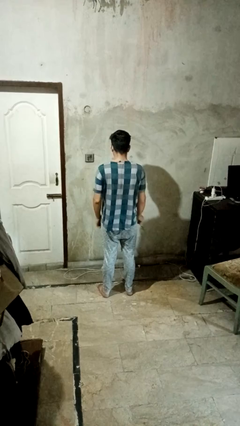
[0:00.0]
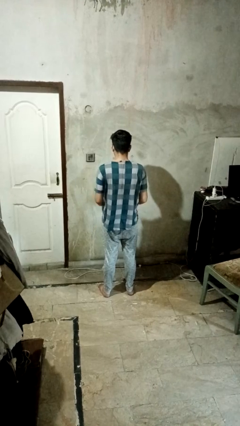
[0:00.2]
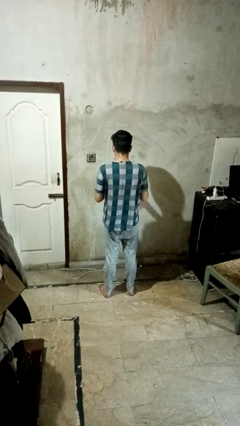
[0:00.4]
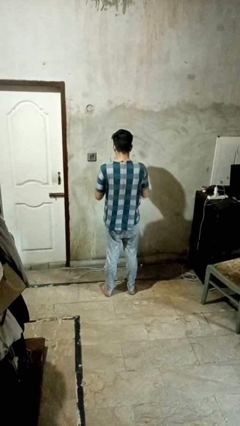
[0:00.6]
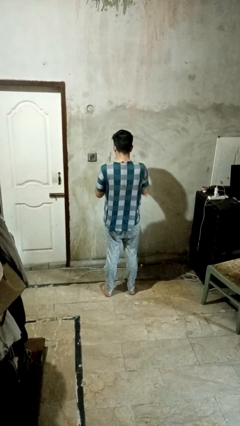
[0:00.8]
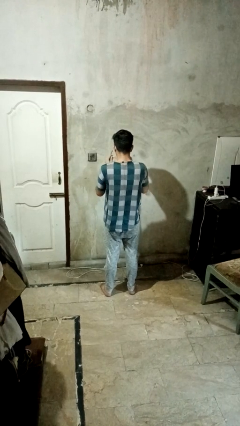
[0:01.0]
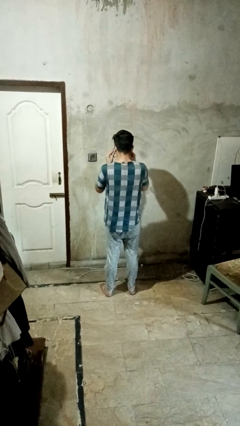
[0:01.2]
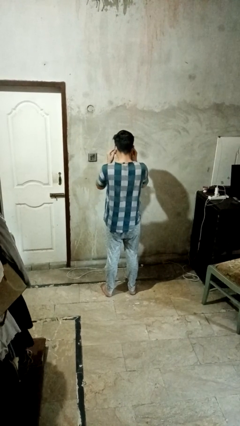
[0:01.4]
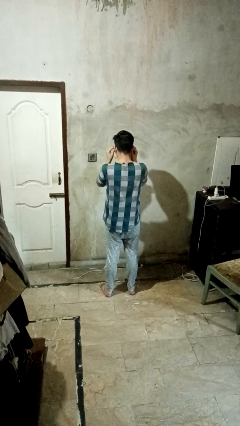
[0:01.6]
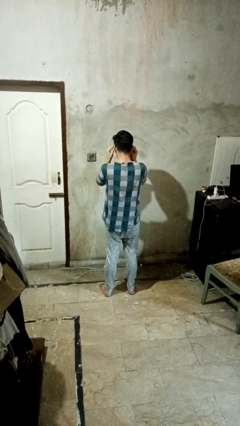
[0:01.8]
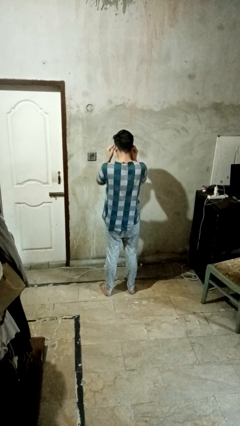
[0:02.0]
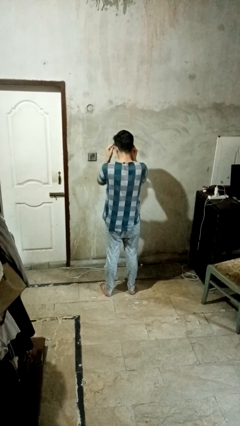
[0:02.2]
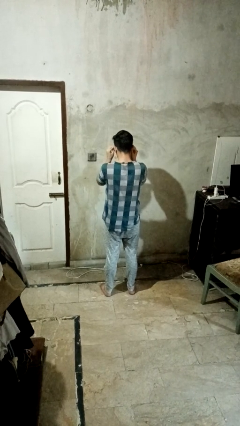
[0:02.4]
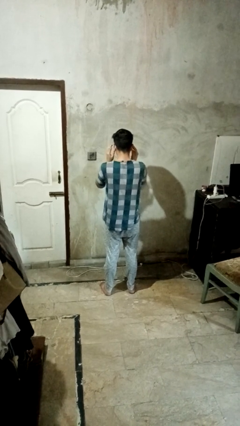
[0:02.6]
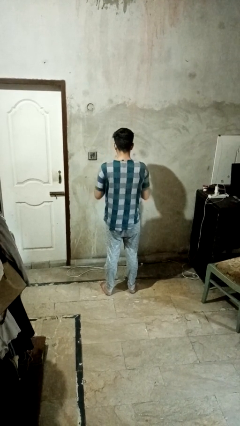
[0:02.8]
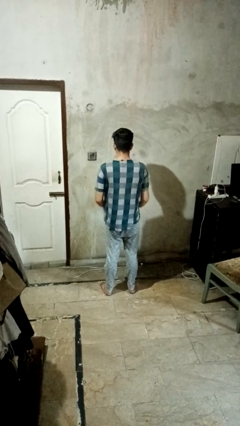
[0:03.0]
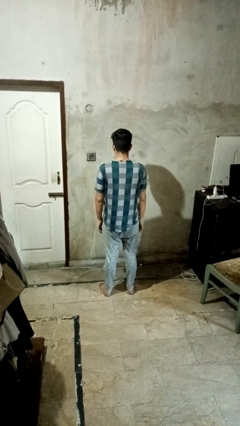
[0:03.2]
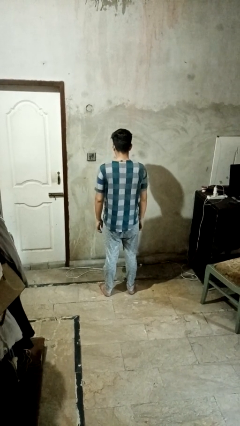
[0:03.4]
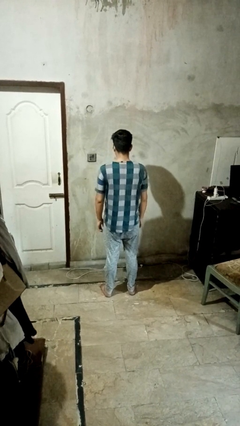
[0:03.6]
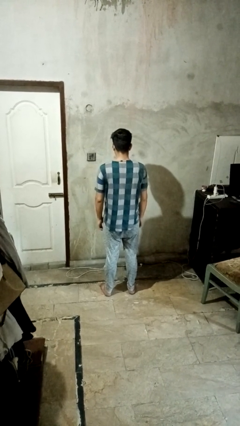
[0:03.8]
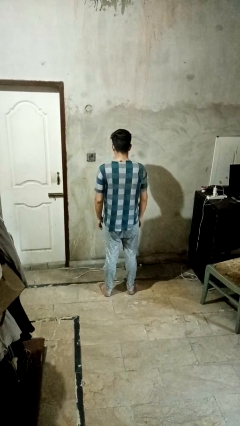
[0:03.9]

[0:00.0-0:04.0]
person puts on glasses

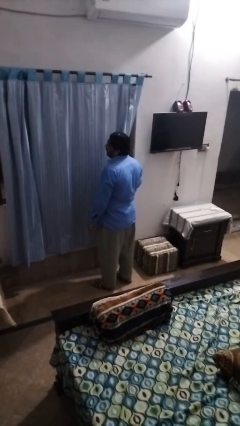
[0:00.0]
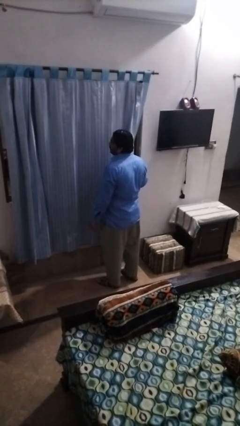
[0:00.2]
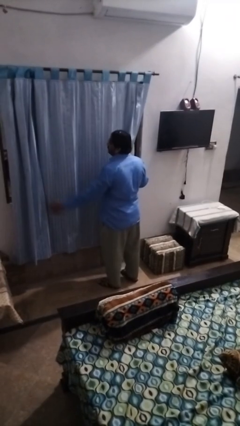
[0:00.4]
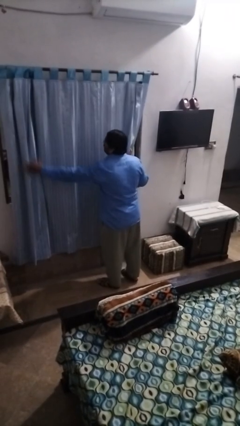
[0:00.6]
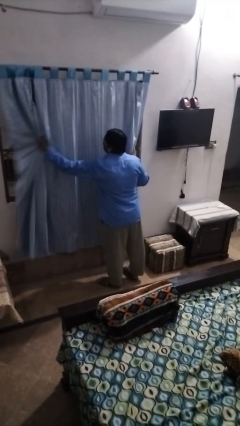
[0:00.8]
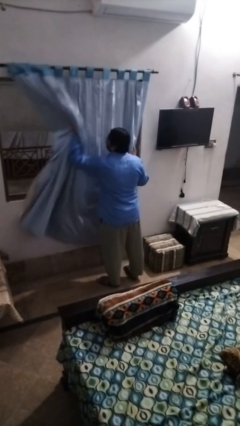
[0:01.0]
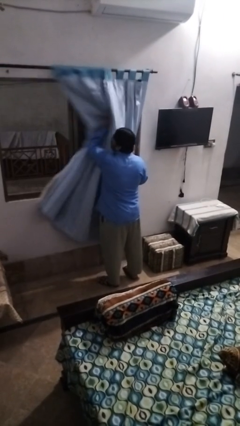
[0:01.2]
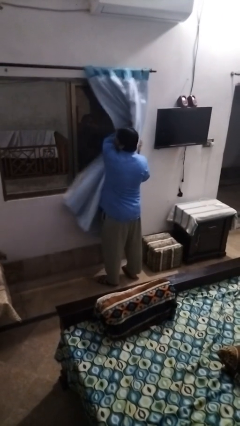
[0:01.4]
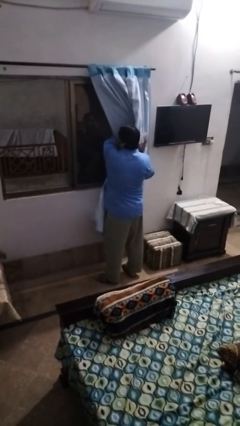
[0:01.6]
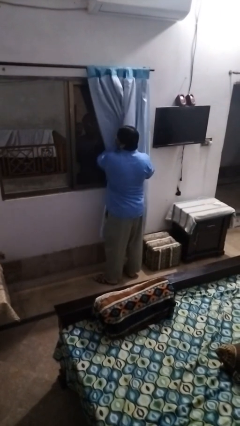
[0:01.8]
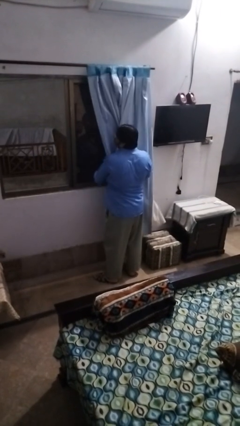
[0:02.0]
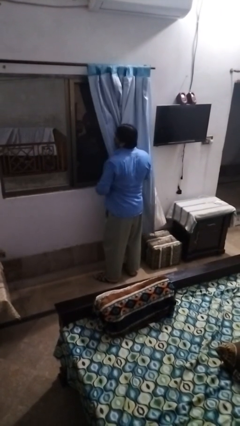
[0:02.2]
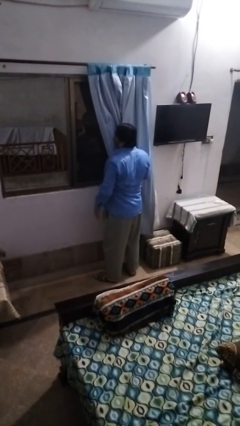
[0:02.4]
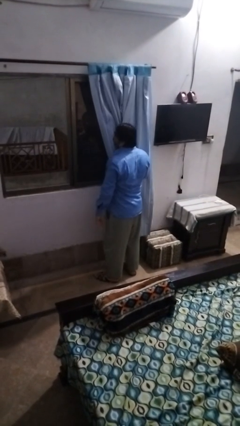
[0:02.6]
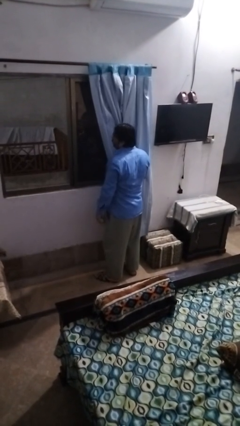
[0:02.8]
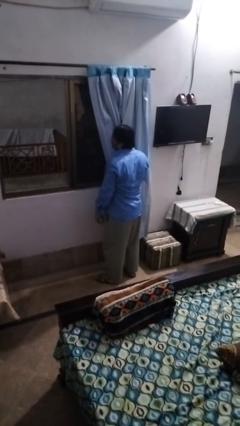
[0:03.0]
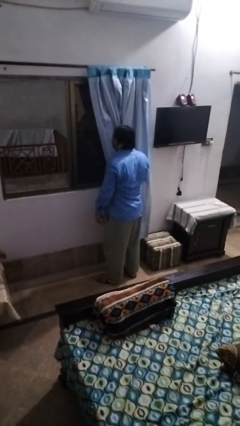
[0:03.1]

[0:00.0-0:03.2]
person opens curtains

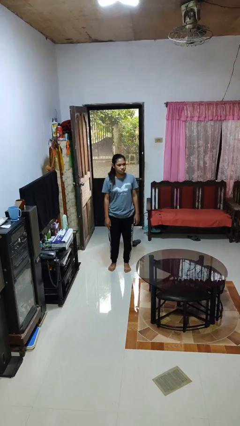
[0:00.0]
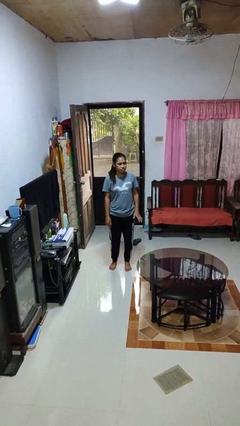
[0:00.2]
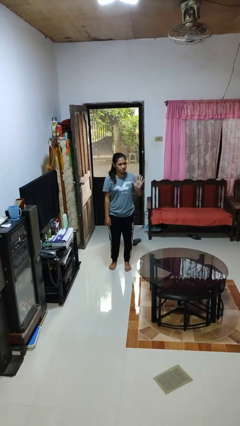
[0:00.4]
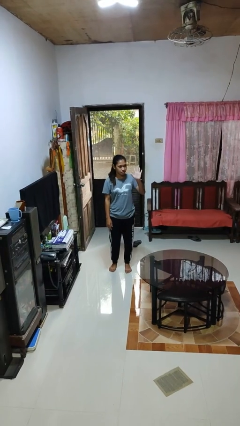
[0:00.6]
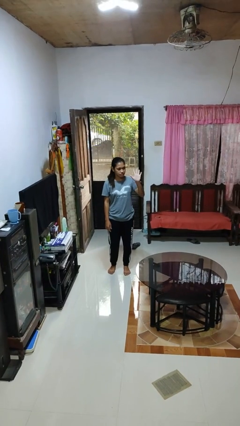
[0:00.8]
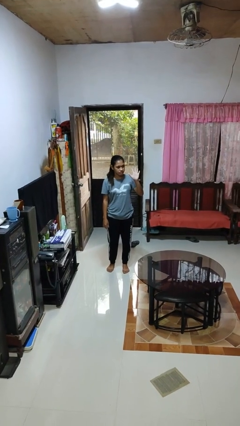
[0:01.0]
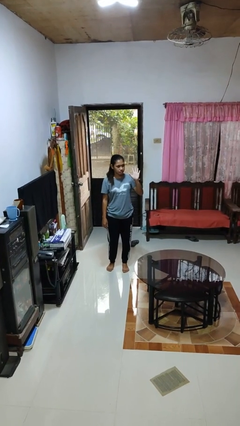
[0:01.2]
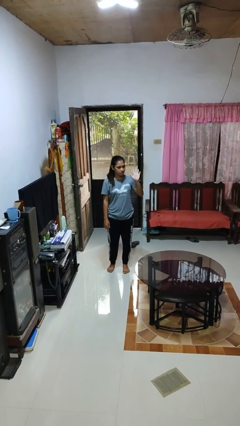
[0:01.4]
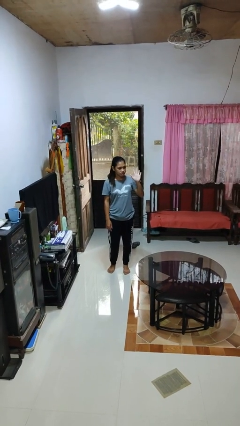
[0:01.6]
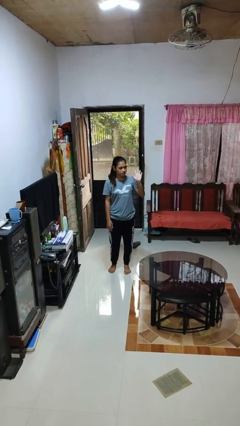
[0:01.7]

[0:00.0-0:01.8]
person gestures number five

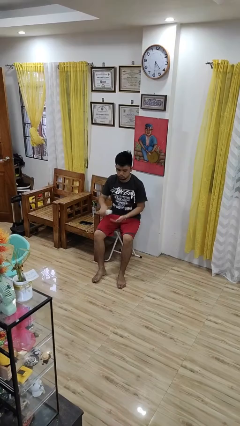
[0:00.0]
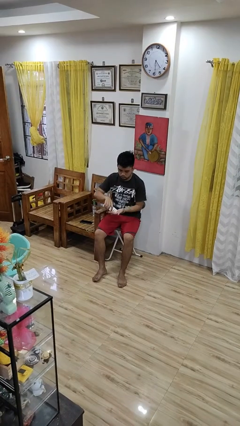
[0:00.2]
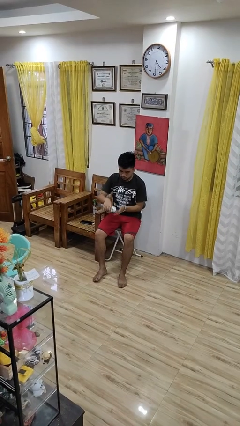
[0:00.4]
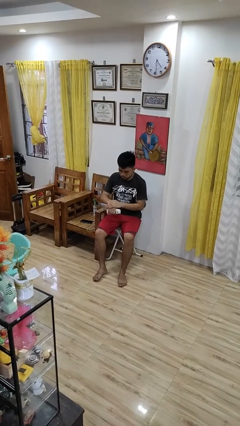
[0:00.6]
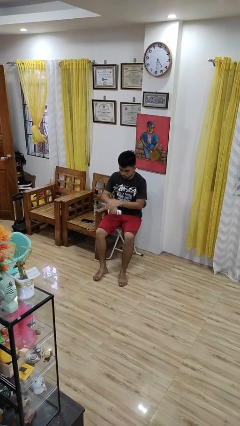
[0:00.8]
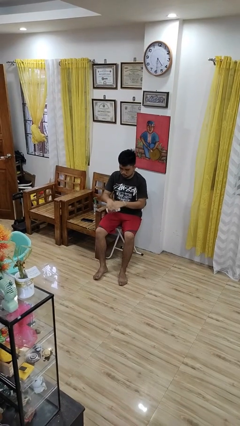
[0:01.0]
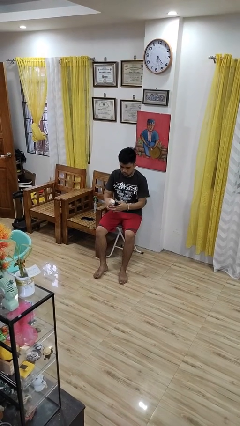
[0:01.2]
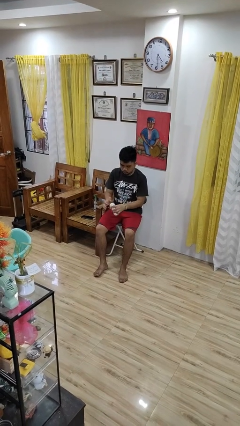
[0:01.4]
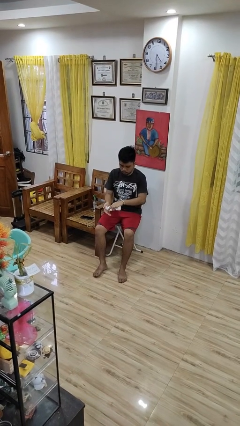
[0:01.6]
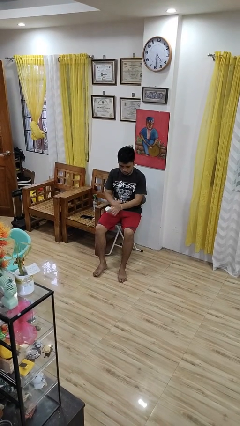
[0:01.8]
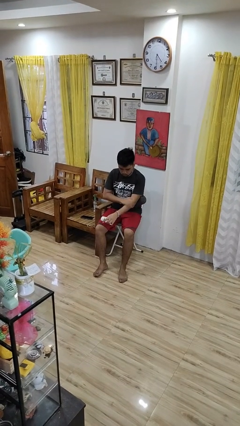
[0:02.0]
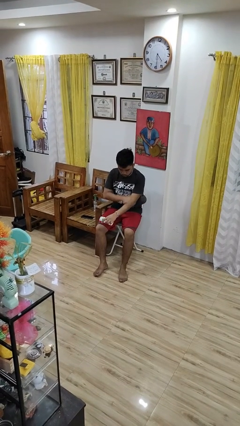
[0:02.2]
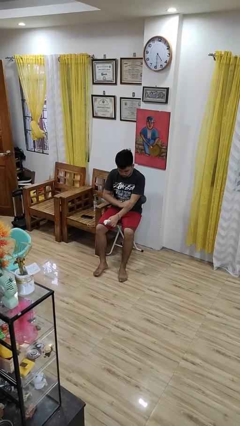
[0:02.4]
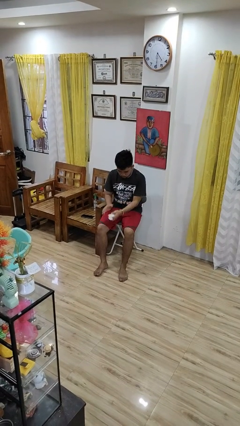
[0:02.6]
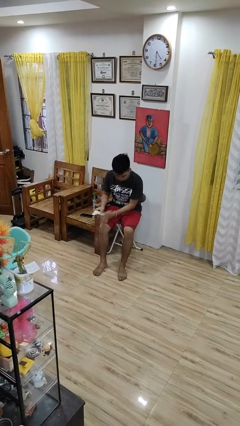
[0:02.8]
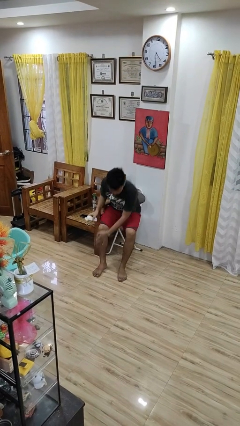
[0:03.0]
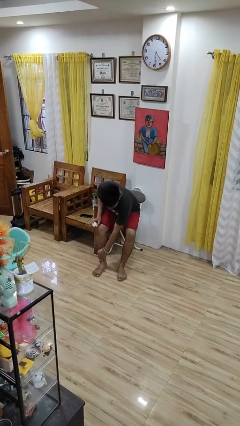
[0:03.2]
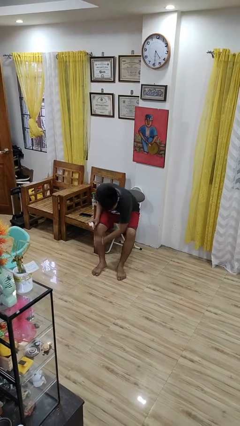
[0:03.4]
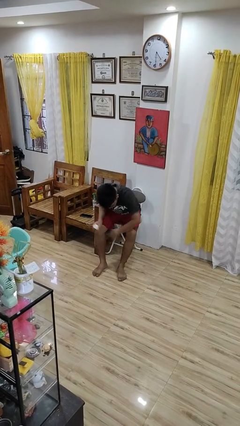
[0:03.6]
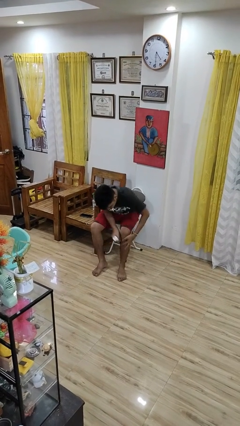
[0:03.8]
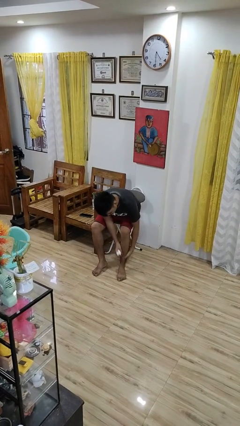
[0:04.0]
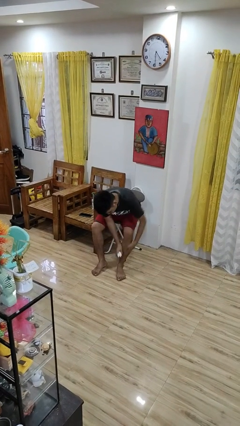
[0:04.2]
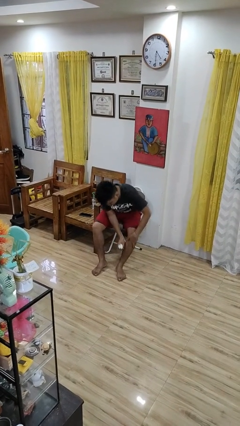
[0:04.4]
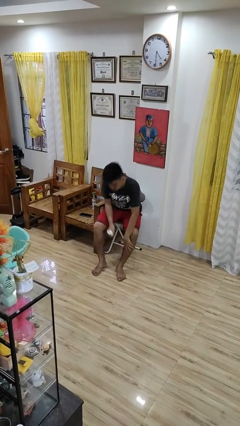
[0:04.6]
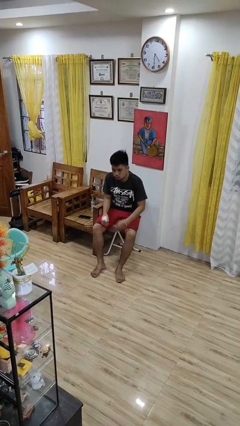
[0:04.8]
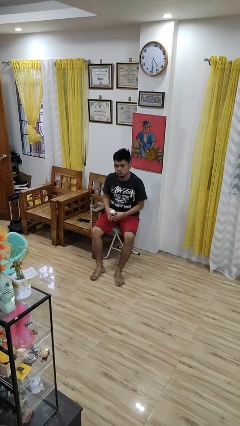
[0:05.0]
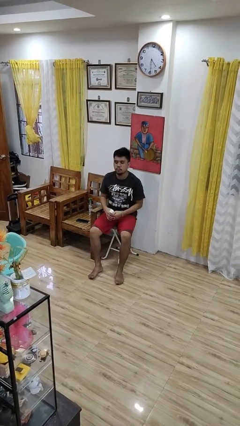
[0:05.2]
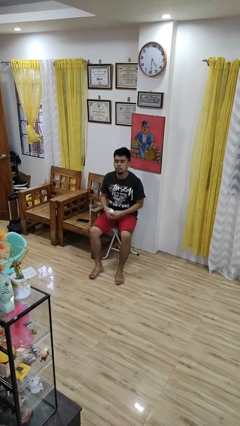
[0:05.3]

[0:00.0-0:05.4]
person applies sunscreen

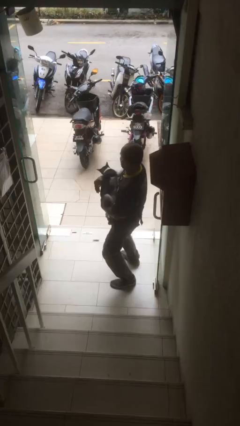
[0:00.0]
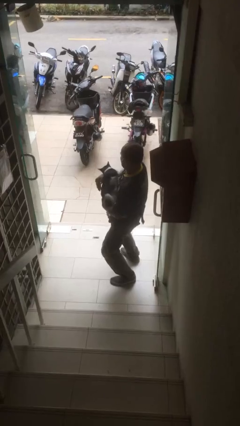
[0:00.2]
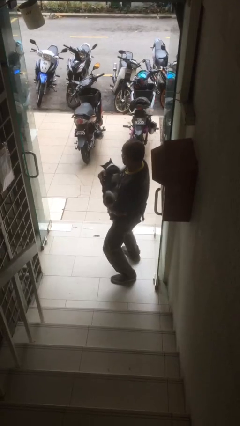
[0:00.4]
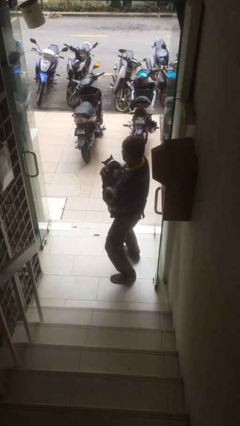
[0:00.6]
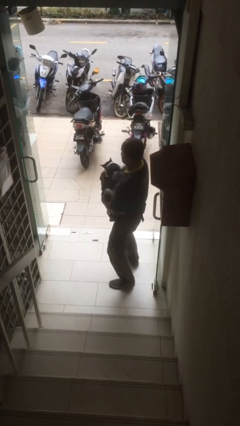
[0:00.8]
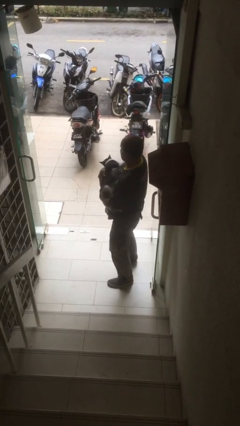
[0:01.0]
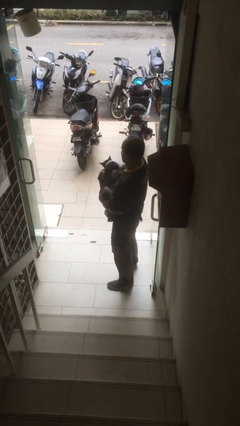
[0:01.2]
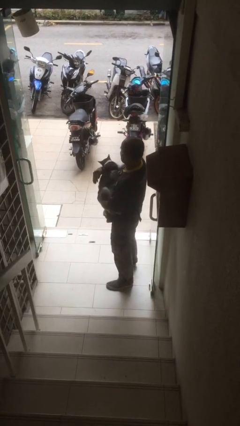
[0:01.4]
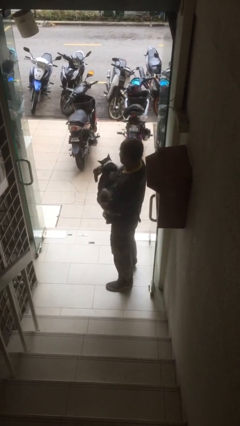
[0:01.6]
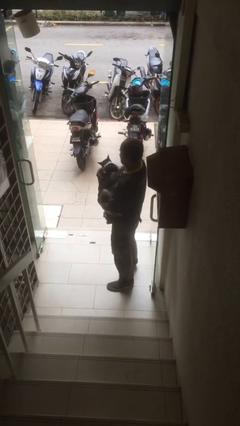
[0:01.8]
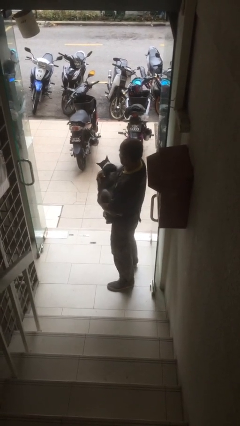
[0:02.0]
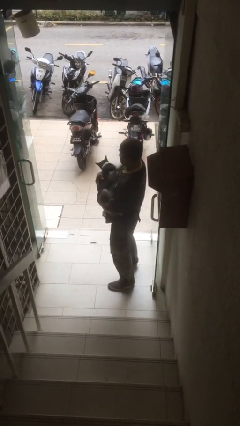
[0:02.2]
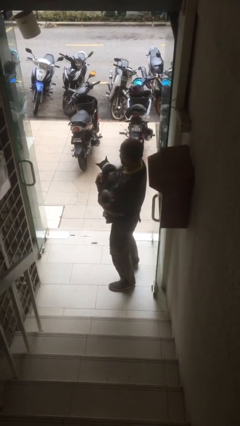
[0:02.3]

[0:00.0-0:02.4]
person hugs cat
